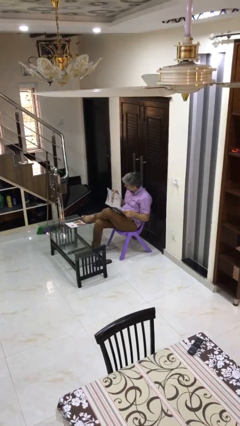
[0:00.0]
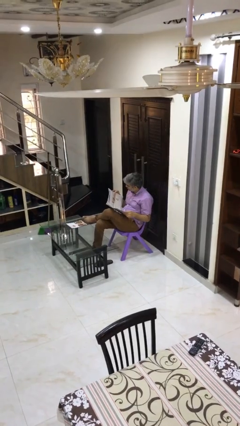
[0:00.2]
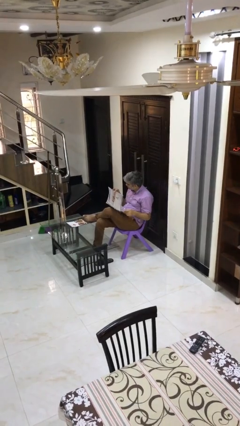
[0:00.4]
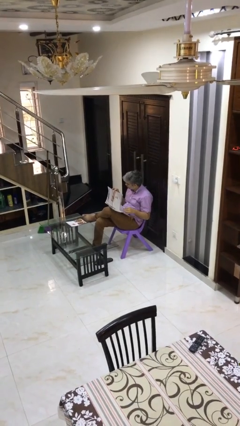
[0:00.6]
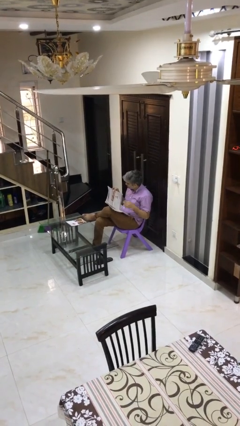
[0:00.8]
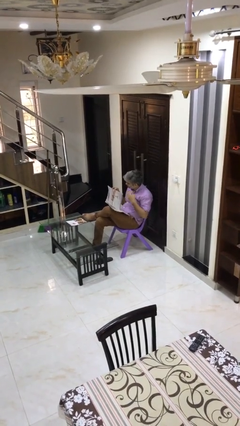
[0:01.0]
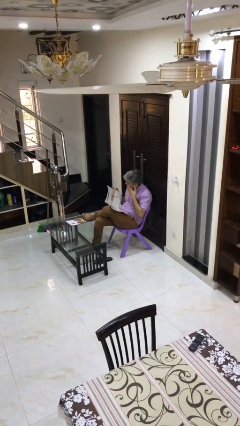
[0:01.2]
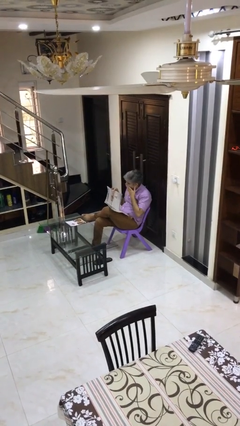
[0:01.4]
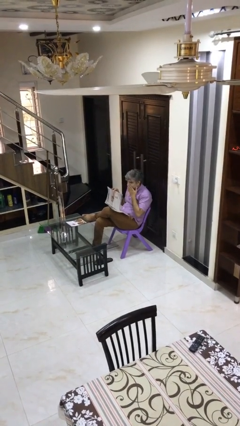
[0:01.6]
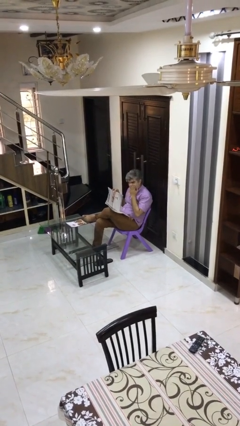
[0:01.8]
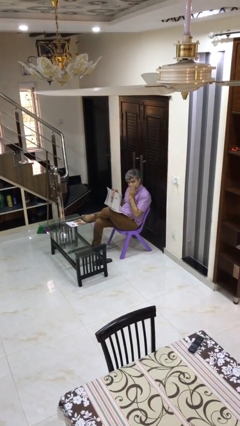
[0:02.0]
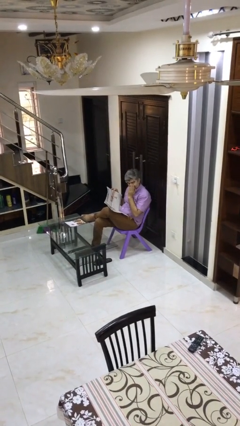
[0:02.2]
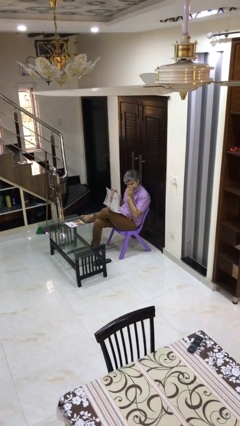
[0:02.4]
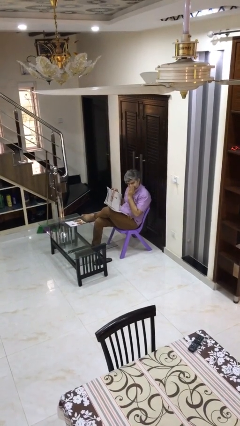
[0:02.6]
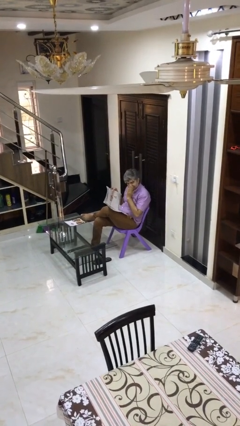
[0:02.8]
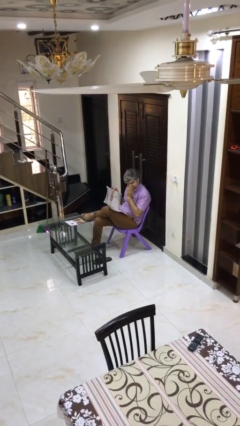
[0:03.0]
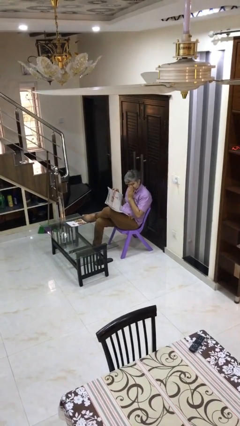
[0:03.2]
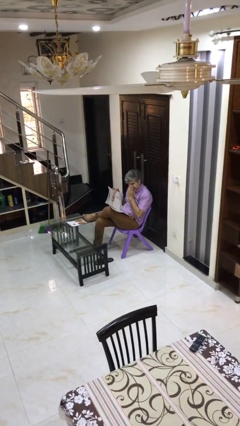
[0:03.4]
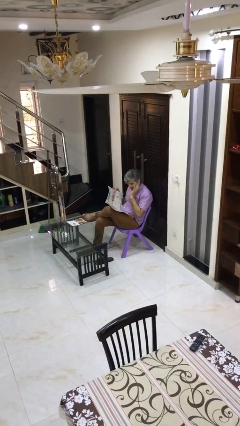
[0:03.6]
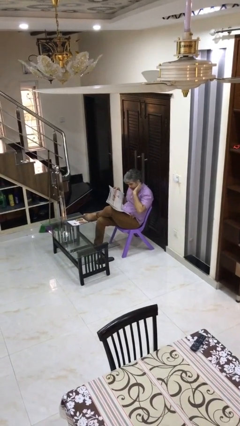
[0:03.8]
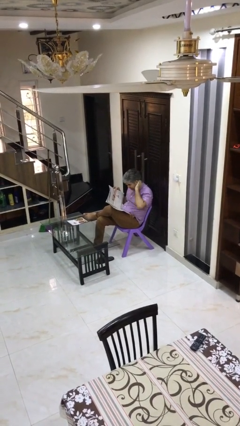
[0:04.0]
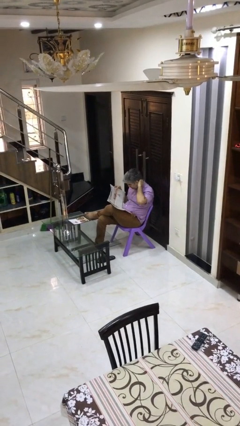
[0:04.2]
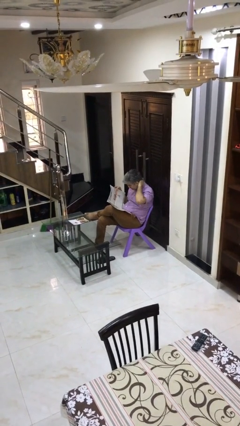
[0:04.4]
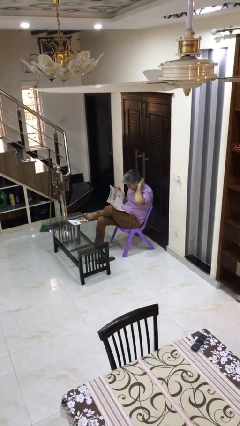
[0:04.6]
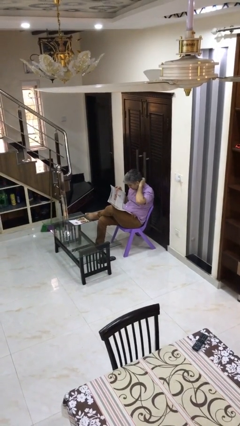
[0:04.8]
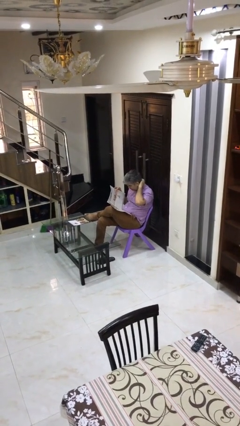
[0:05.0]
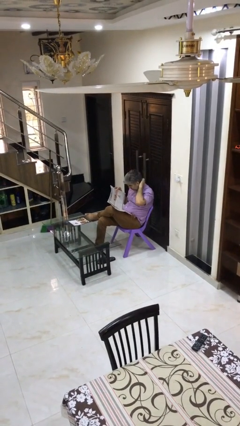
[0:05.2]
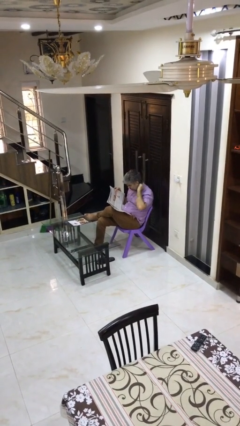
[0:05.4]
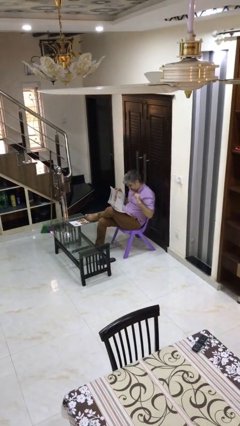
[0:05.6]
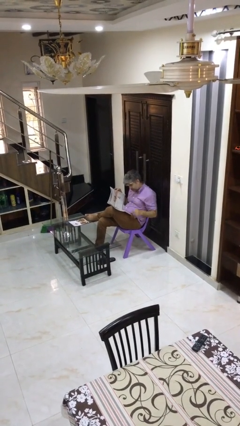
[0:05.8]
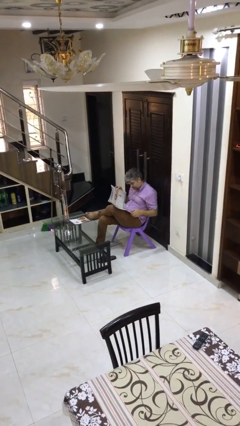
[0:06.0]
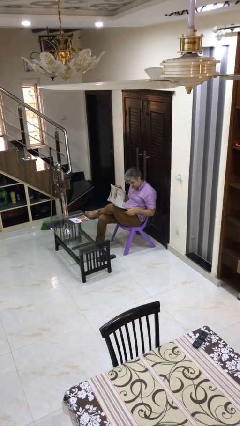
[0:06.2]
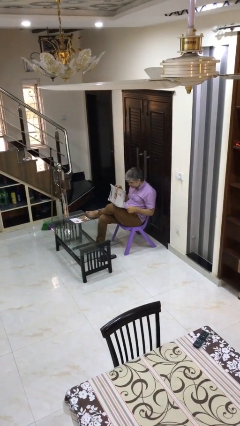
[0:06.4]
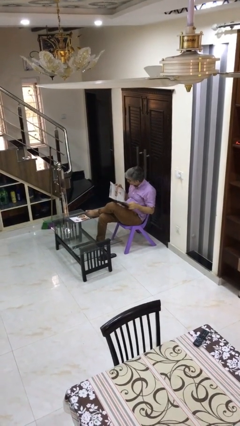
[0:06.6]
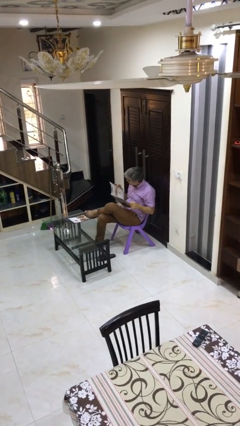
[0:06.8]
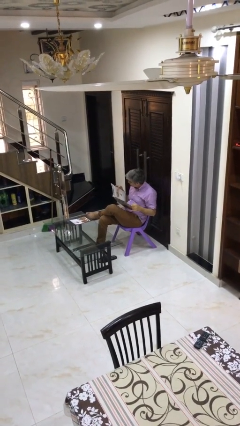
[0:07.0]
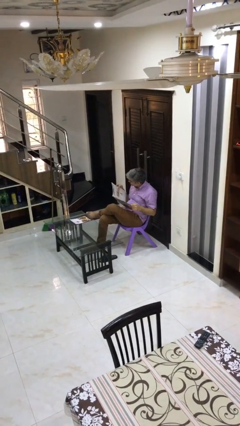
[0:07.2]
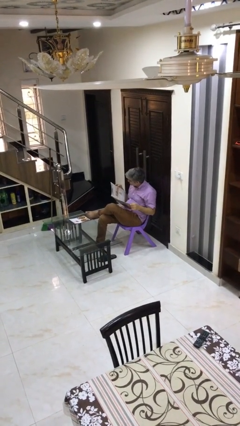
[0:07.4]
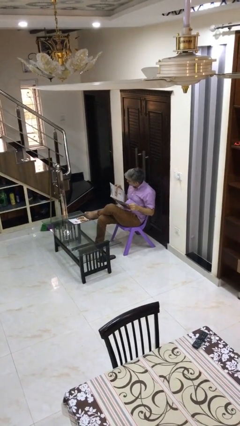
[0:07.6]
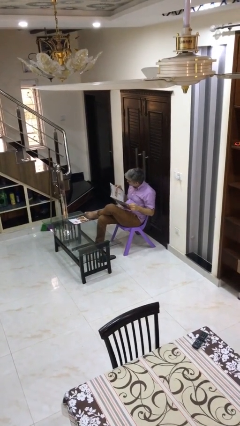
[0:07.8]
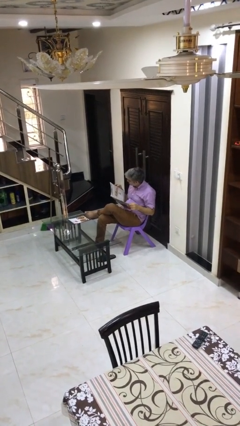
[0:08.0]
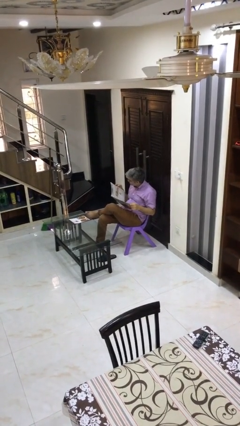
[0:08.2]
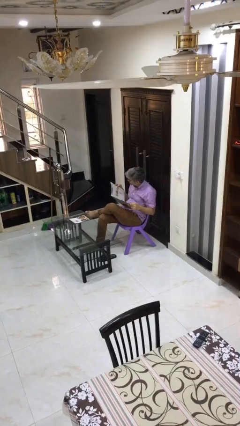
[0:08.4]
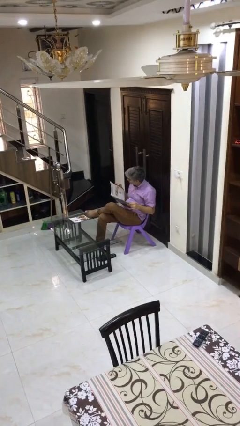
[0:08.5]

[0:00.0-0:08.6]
person reads document

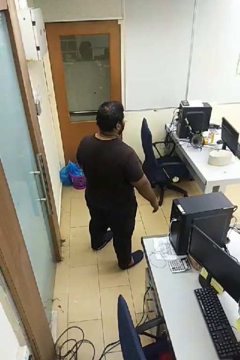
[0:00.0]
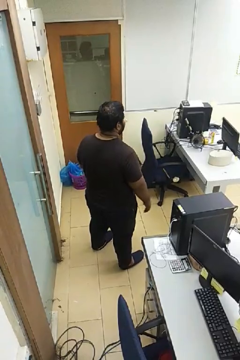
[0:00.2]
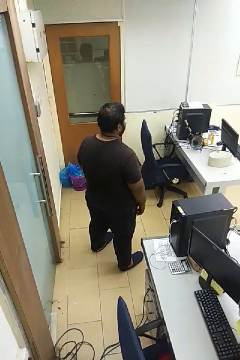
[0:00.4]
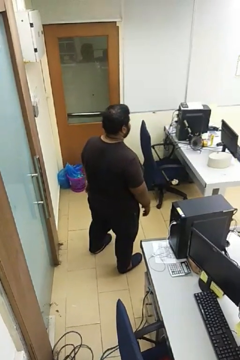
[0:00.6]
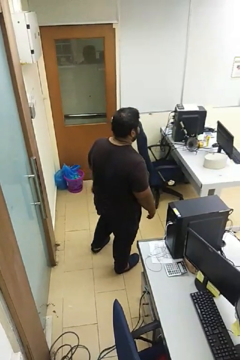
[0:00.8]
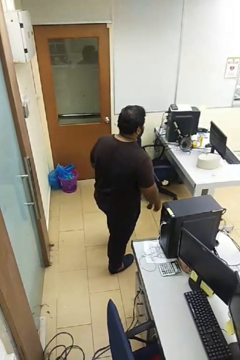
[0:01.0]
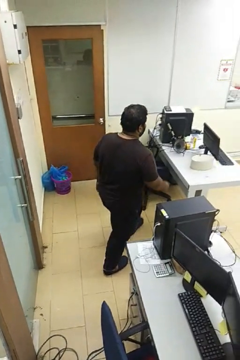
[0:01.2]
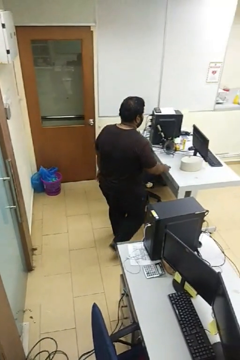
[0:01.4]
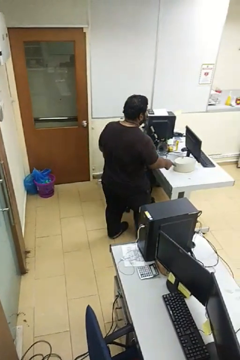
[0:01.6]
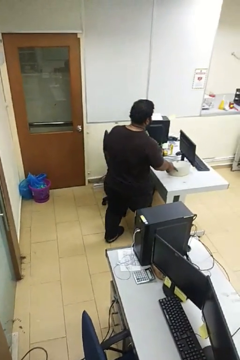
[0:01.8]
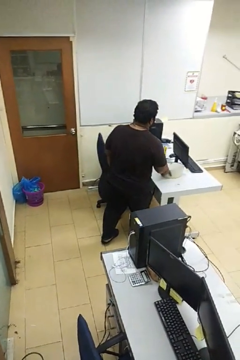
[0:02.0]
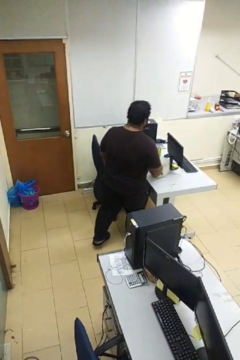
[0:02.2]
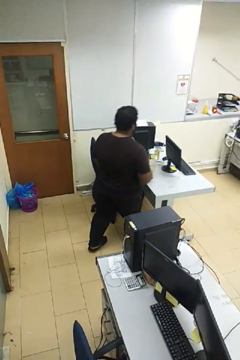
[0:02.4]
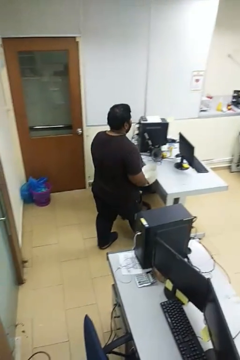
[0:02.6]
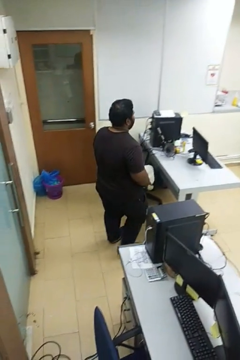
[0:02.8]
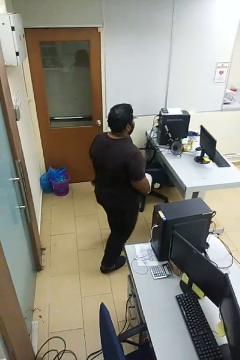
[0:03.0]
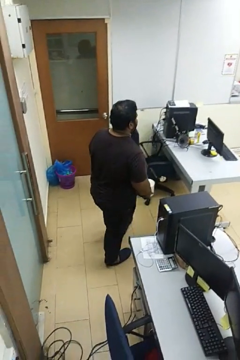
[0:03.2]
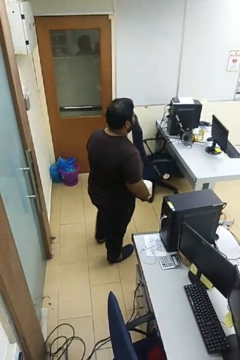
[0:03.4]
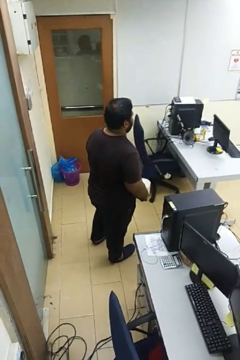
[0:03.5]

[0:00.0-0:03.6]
person picks up object from table

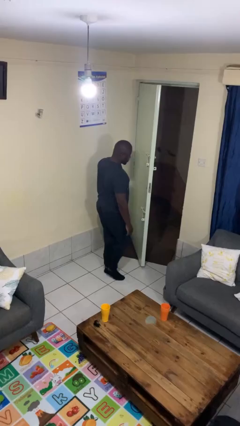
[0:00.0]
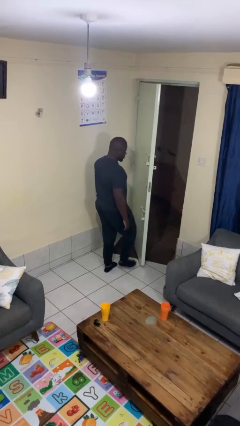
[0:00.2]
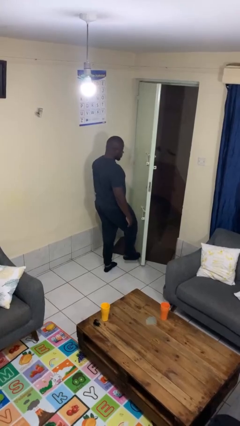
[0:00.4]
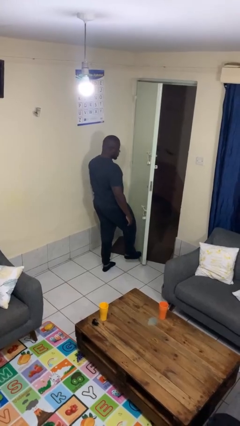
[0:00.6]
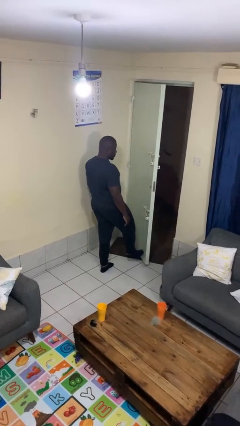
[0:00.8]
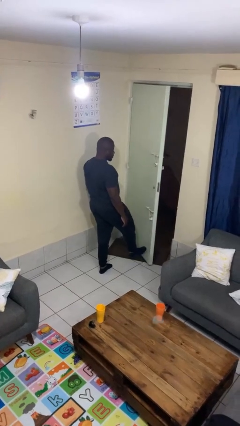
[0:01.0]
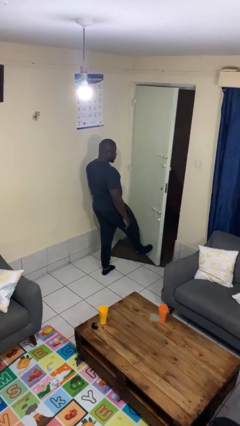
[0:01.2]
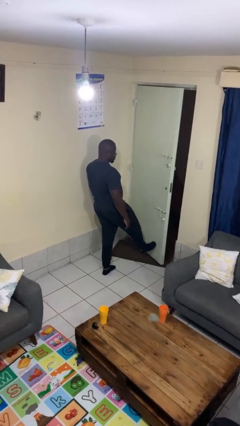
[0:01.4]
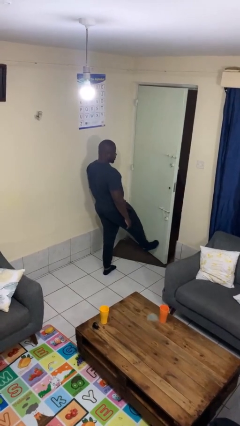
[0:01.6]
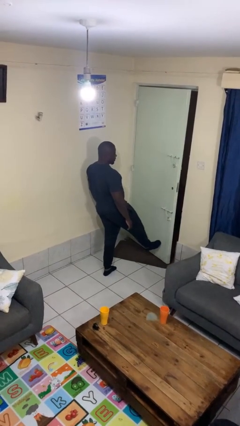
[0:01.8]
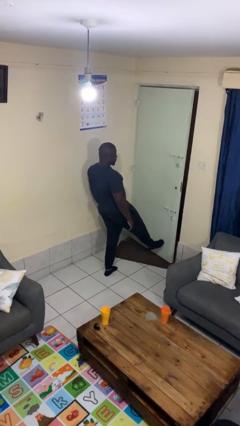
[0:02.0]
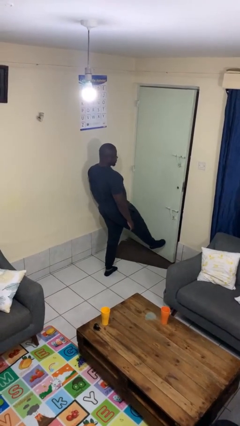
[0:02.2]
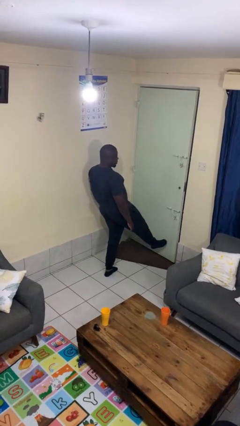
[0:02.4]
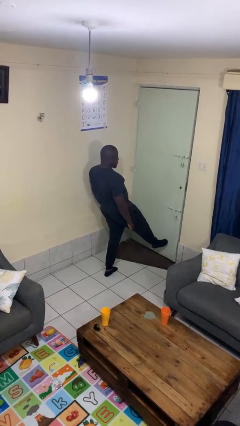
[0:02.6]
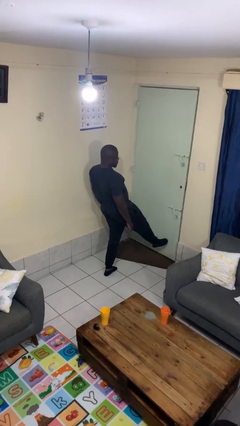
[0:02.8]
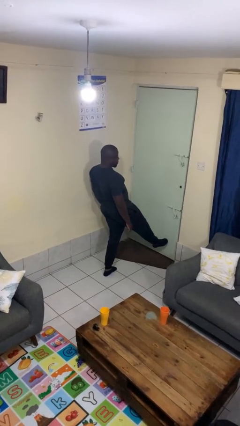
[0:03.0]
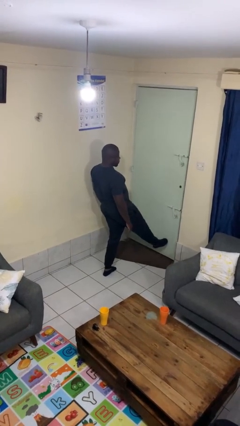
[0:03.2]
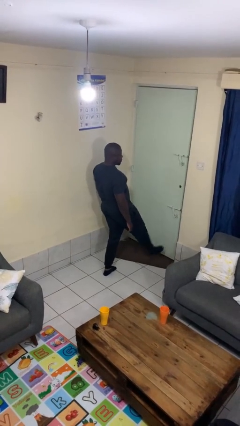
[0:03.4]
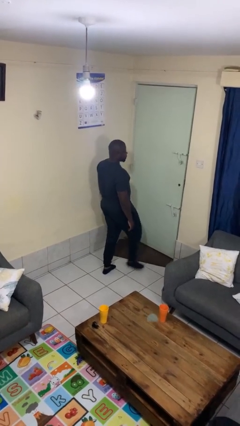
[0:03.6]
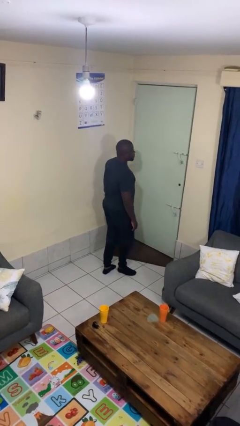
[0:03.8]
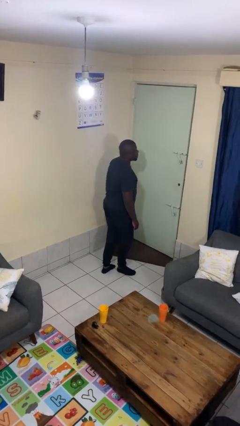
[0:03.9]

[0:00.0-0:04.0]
person closes door with foot

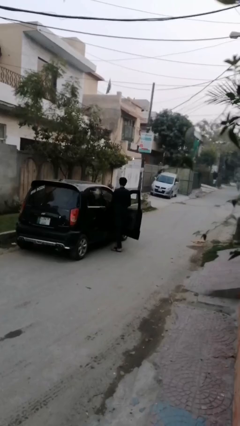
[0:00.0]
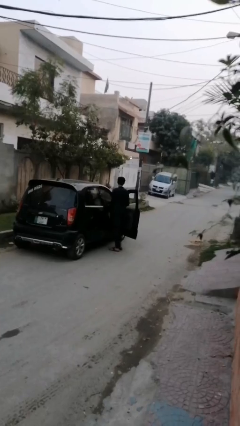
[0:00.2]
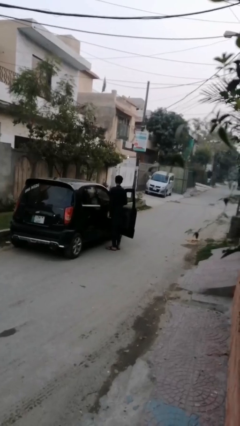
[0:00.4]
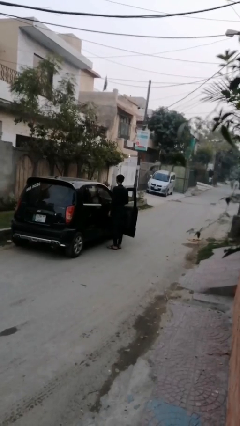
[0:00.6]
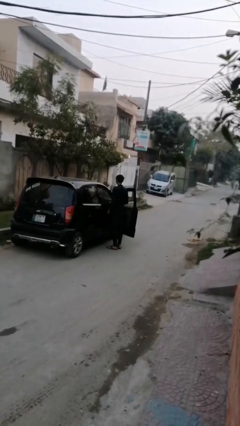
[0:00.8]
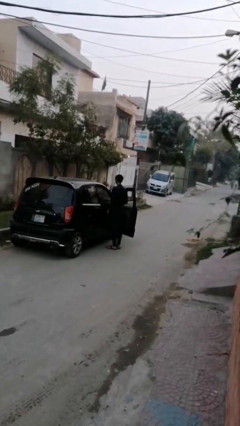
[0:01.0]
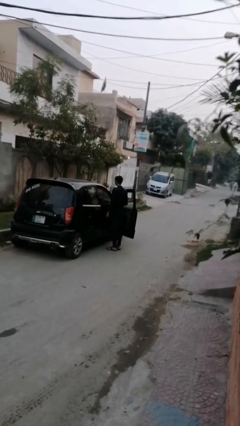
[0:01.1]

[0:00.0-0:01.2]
person exits car

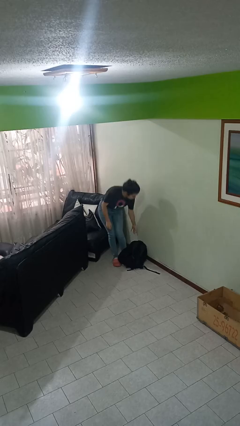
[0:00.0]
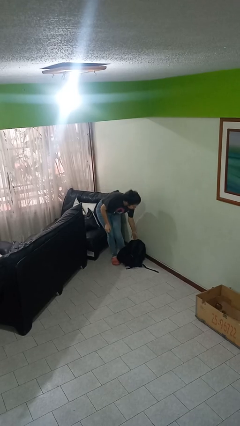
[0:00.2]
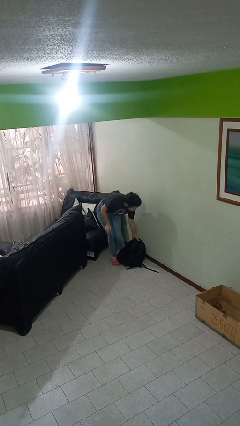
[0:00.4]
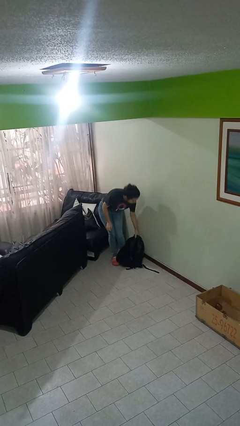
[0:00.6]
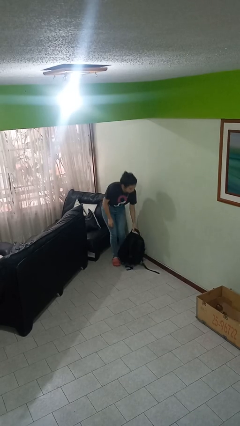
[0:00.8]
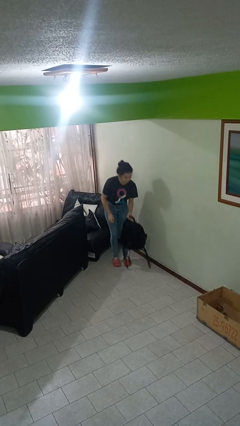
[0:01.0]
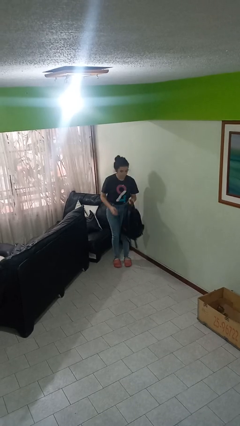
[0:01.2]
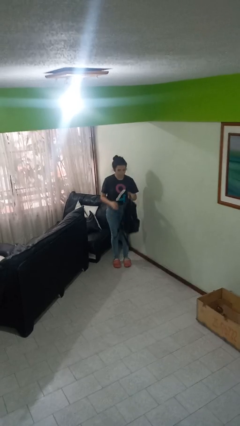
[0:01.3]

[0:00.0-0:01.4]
person picks up object from floor
